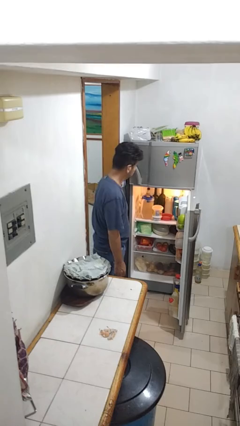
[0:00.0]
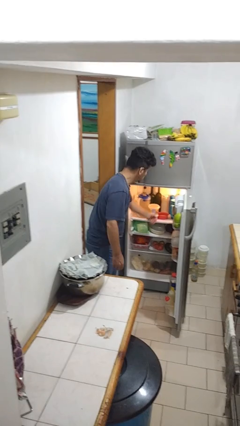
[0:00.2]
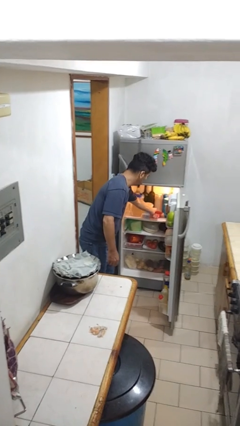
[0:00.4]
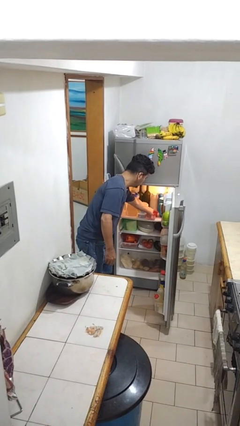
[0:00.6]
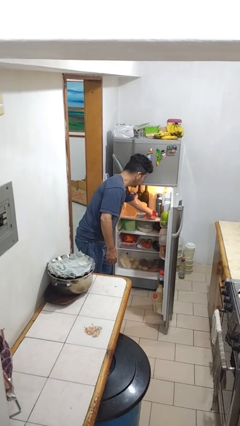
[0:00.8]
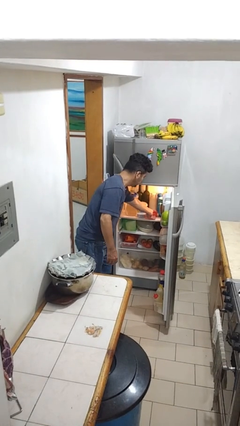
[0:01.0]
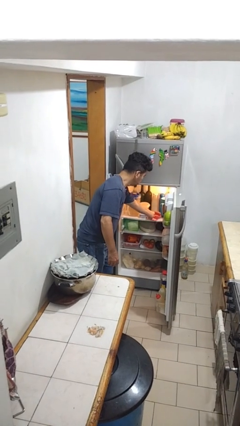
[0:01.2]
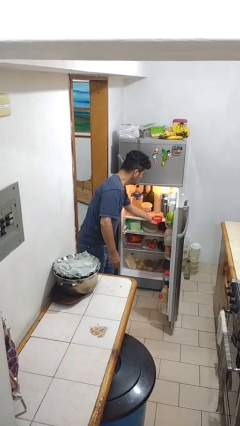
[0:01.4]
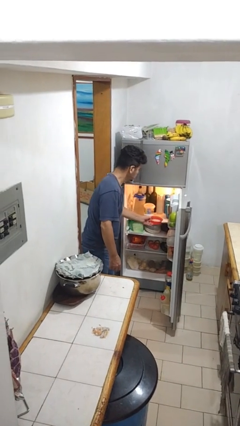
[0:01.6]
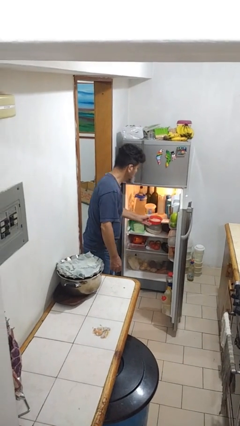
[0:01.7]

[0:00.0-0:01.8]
person takes object from refrigerator

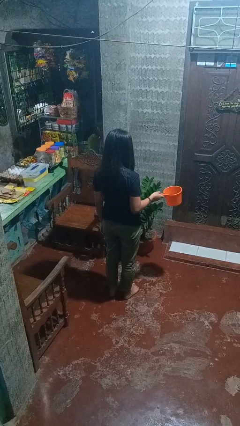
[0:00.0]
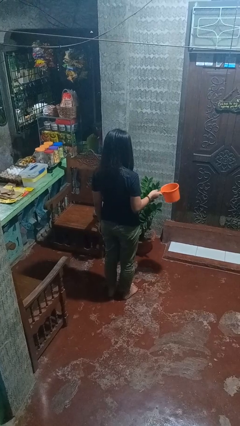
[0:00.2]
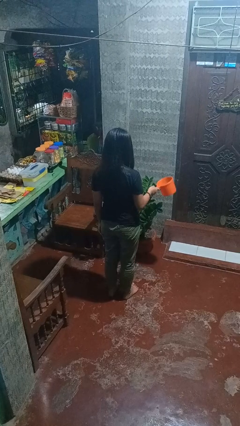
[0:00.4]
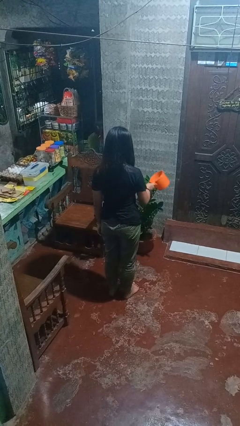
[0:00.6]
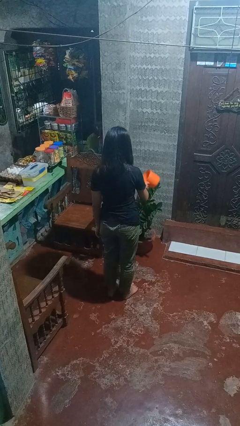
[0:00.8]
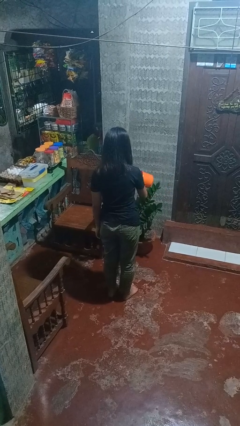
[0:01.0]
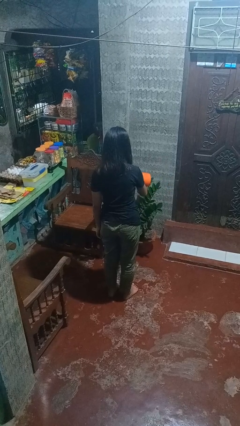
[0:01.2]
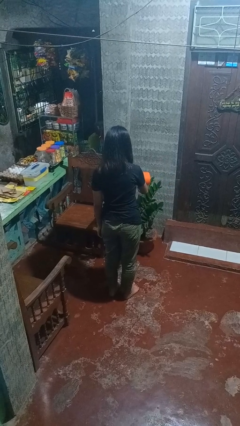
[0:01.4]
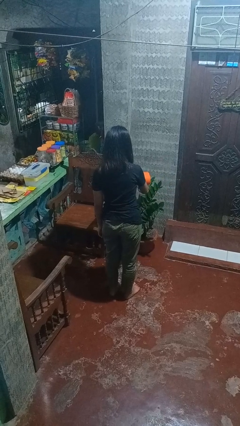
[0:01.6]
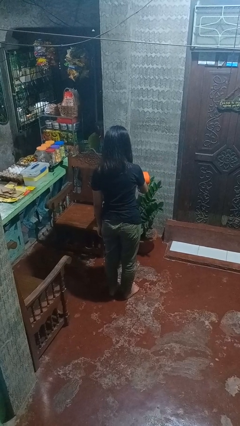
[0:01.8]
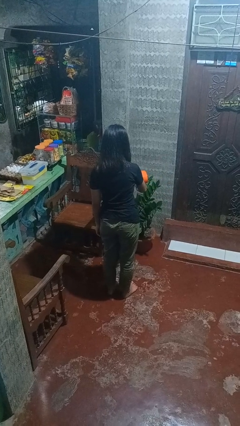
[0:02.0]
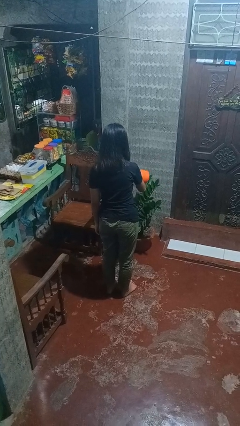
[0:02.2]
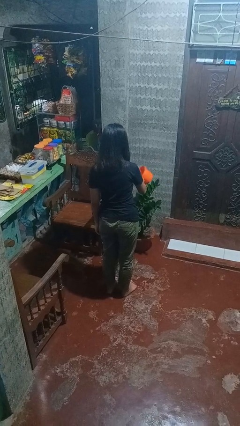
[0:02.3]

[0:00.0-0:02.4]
person waters houseplant

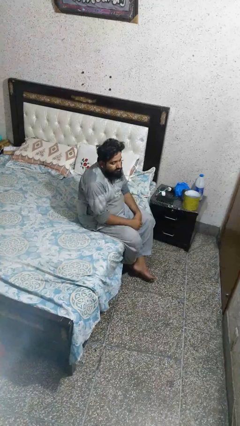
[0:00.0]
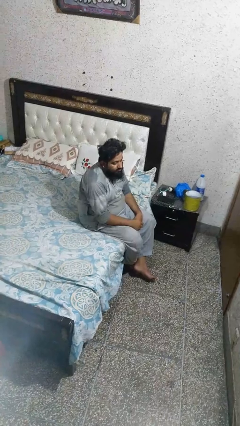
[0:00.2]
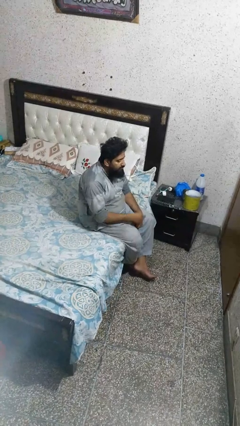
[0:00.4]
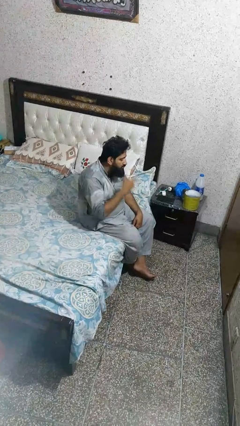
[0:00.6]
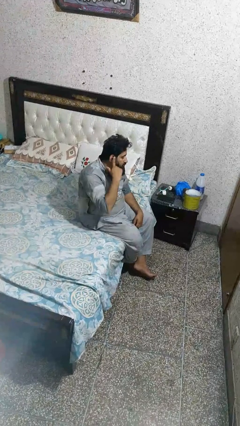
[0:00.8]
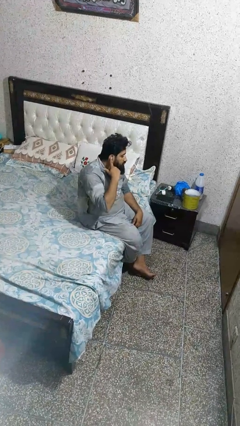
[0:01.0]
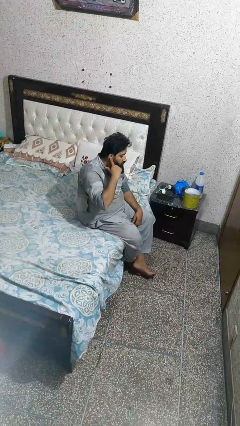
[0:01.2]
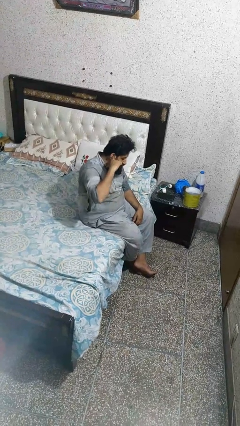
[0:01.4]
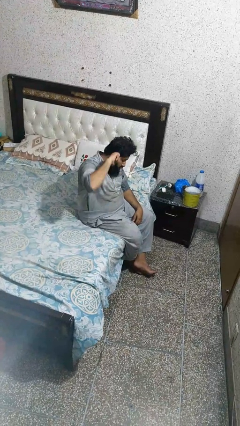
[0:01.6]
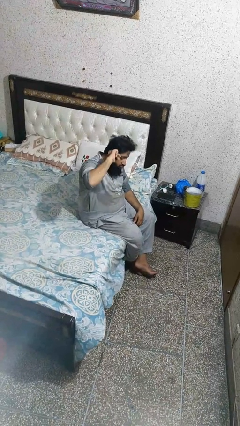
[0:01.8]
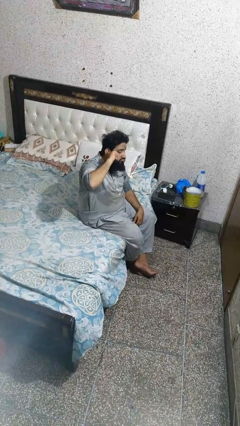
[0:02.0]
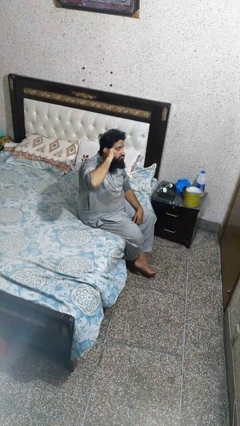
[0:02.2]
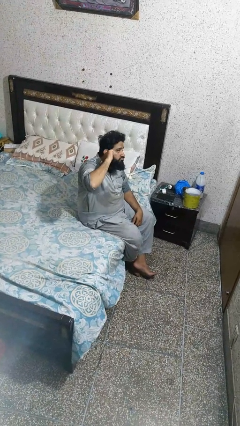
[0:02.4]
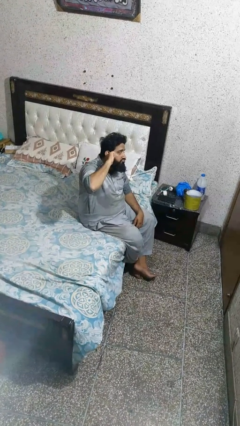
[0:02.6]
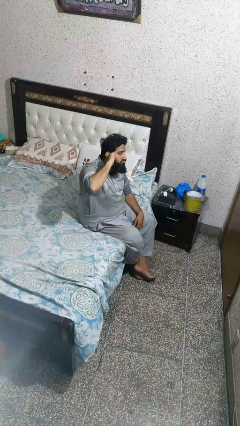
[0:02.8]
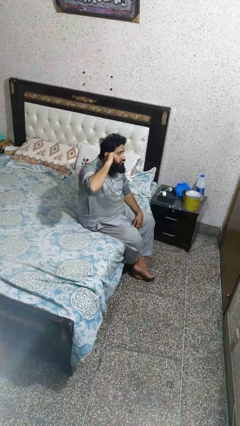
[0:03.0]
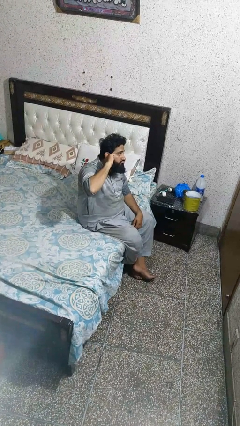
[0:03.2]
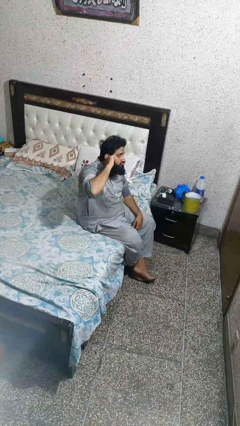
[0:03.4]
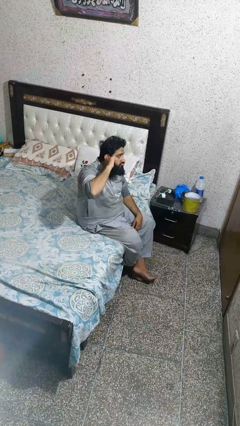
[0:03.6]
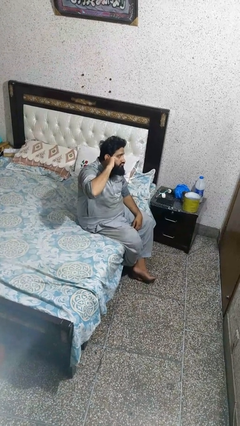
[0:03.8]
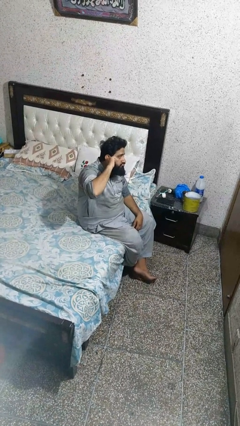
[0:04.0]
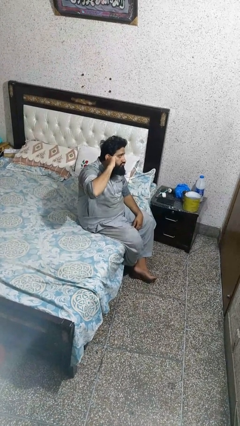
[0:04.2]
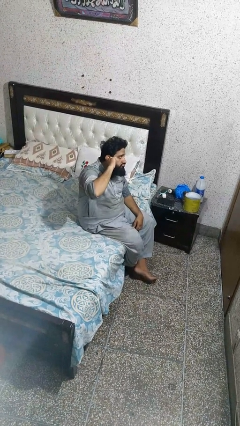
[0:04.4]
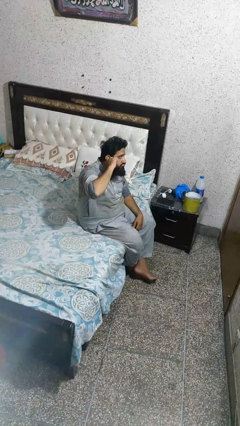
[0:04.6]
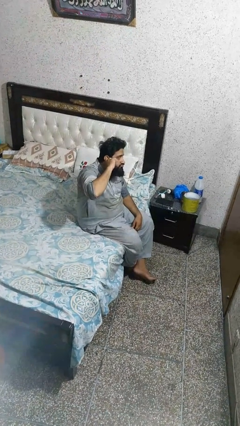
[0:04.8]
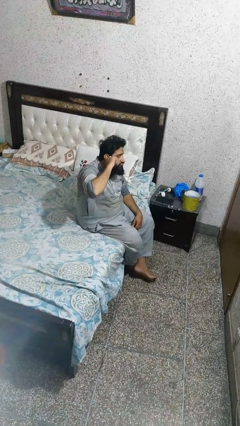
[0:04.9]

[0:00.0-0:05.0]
person puts fingers in ear

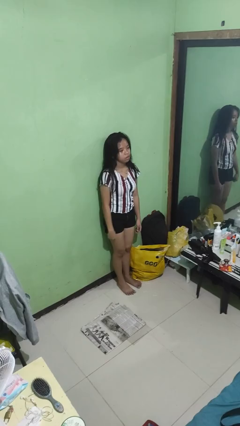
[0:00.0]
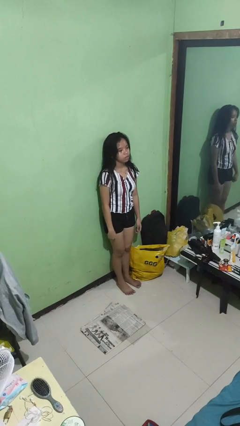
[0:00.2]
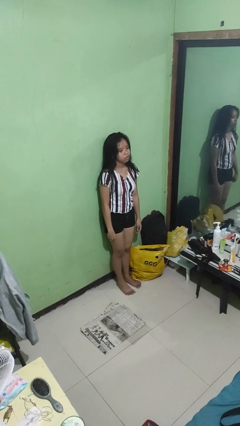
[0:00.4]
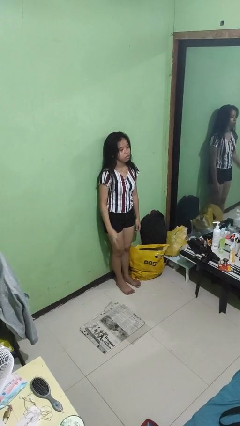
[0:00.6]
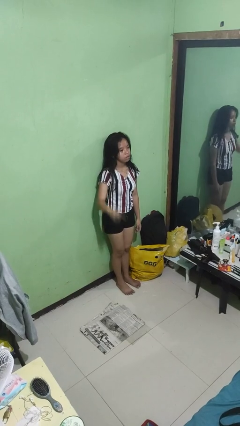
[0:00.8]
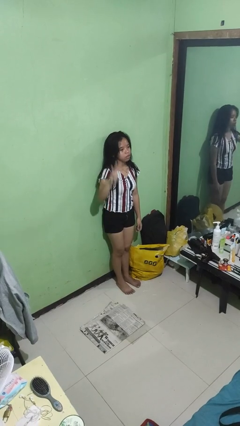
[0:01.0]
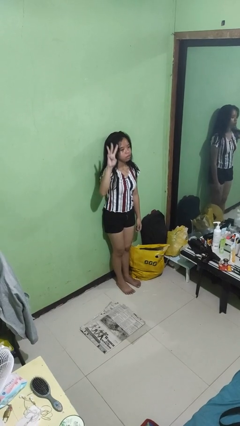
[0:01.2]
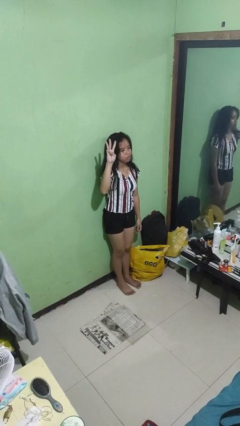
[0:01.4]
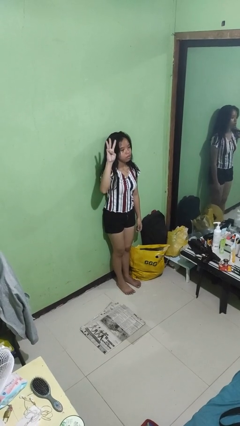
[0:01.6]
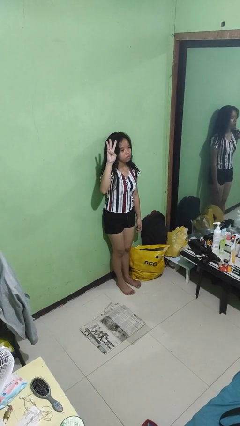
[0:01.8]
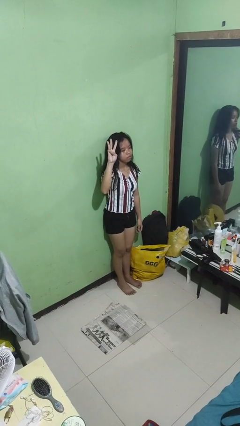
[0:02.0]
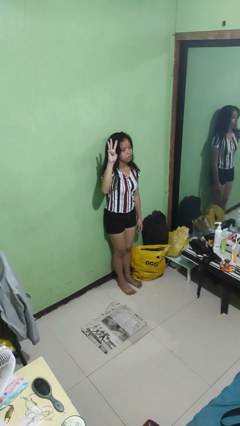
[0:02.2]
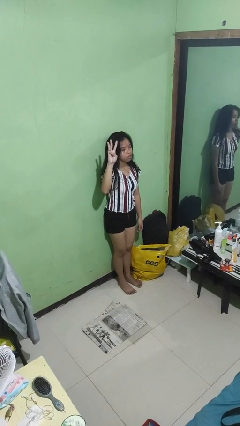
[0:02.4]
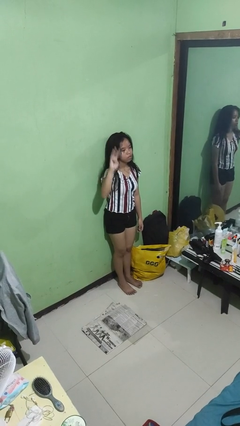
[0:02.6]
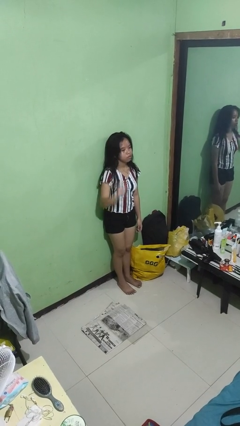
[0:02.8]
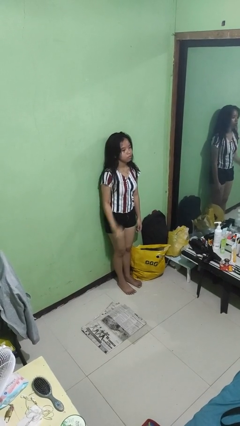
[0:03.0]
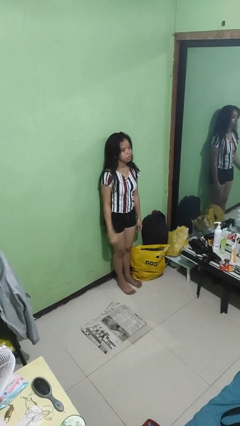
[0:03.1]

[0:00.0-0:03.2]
person gestures number three

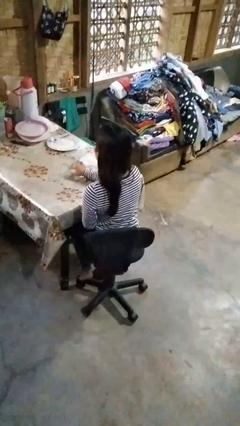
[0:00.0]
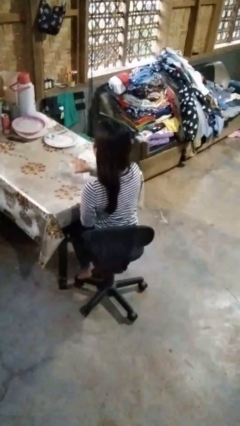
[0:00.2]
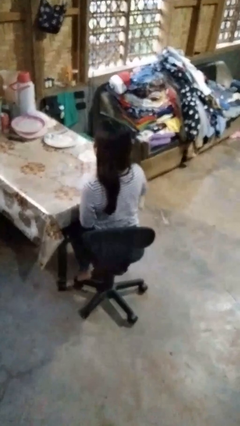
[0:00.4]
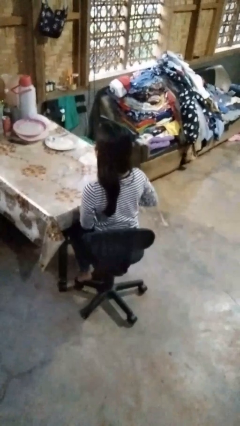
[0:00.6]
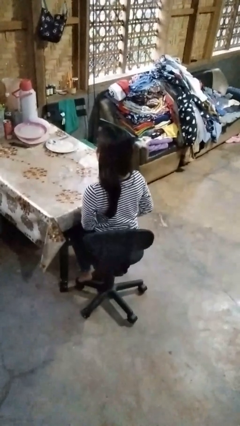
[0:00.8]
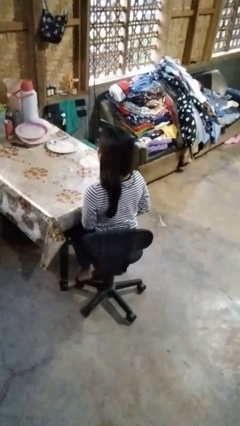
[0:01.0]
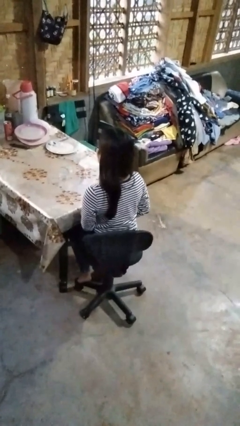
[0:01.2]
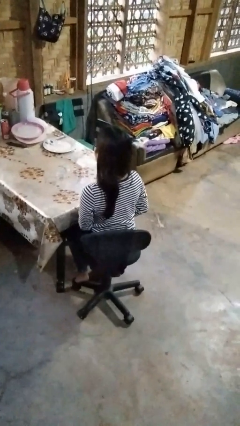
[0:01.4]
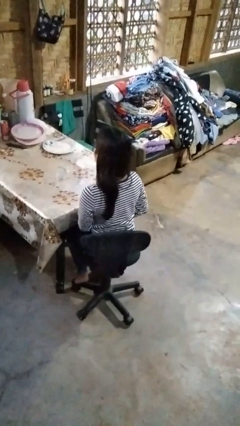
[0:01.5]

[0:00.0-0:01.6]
person knocks over glass

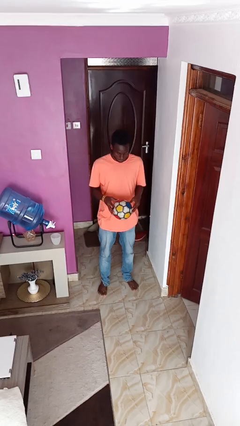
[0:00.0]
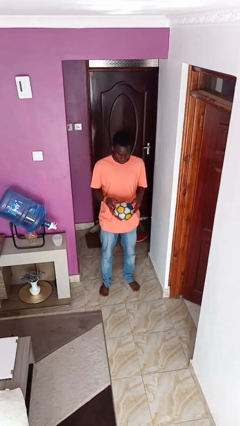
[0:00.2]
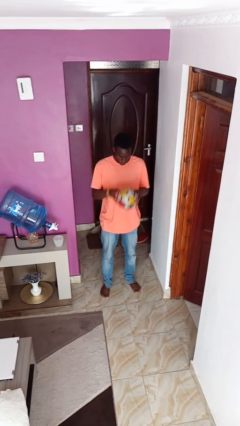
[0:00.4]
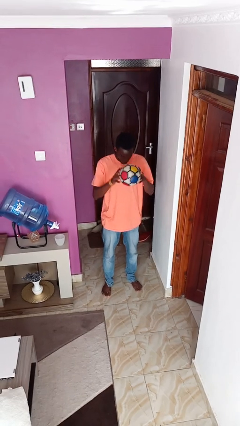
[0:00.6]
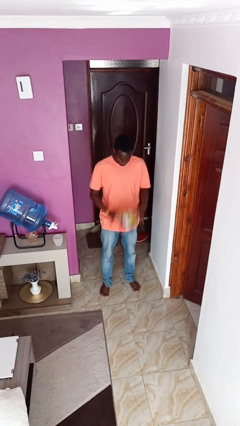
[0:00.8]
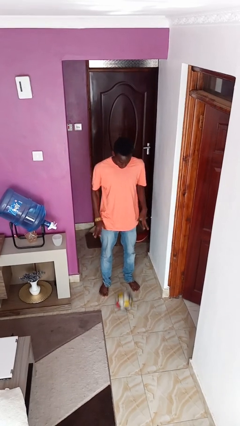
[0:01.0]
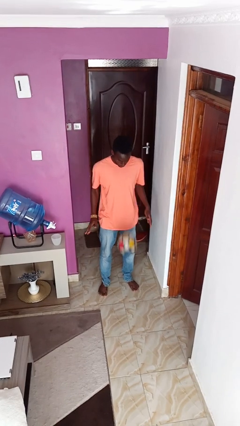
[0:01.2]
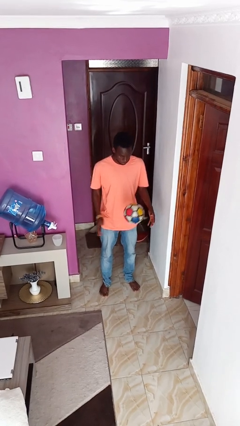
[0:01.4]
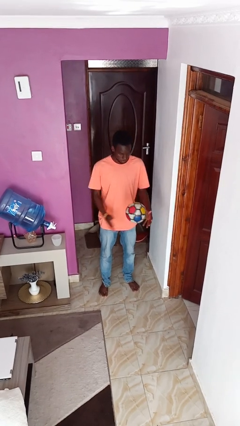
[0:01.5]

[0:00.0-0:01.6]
person bounces ball on floor

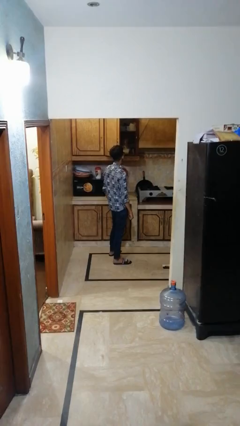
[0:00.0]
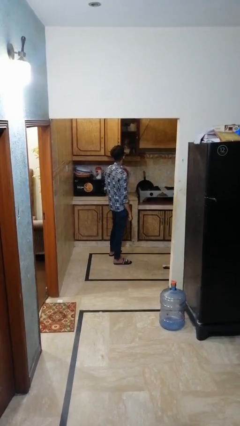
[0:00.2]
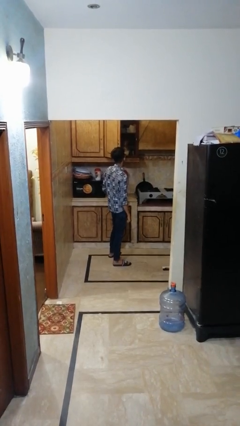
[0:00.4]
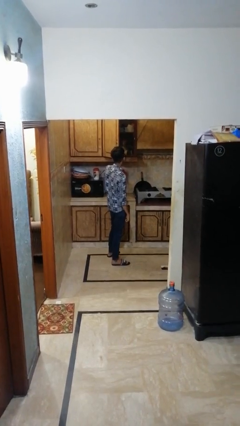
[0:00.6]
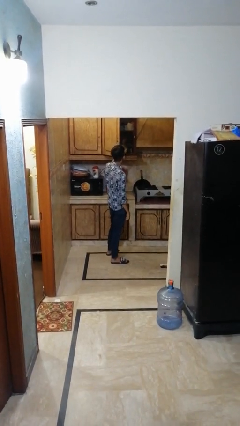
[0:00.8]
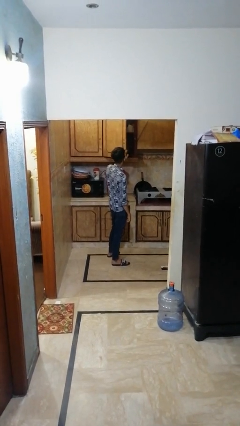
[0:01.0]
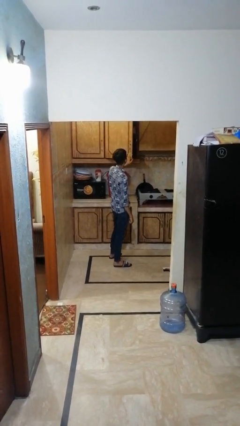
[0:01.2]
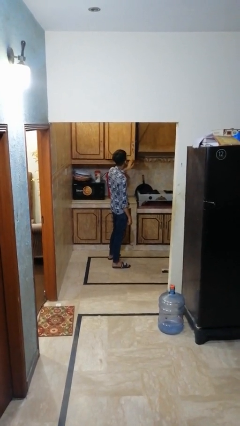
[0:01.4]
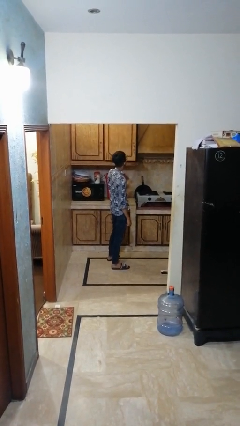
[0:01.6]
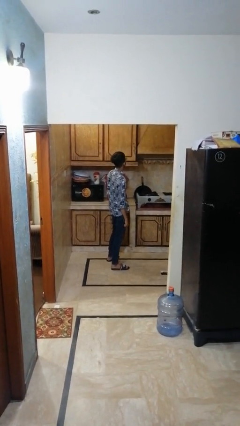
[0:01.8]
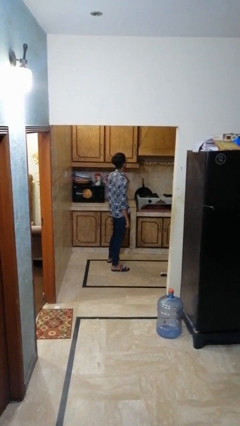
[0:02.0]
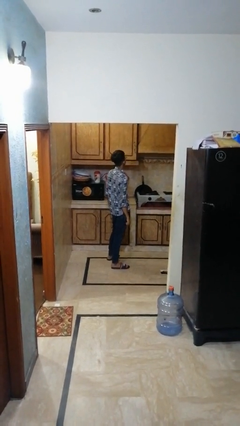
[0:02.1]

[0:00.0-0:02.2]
person closes cabinet
